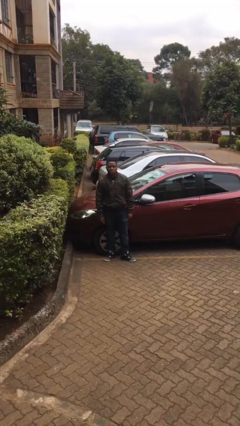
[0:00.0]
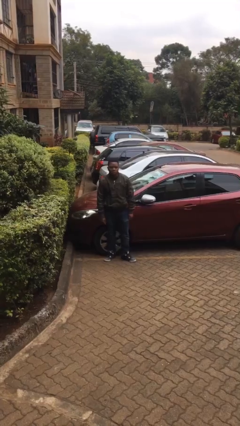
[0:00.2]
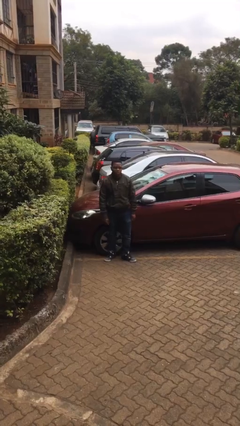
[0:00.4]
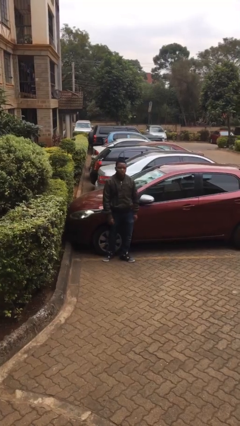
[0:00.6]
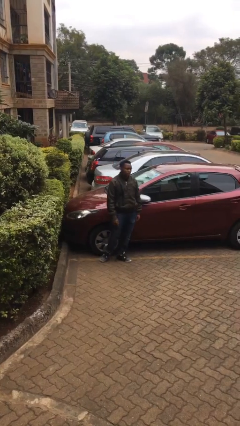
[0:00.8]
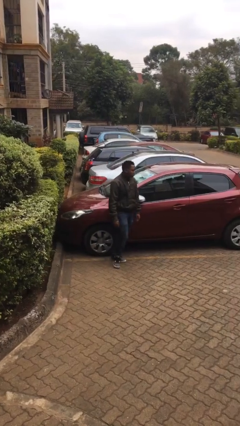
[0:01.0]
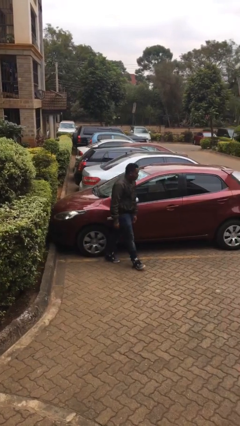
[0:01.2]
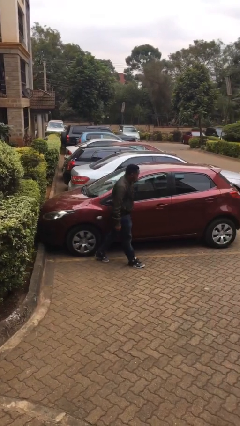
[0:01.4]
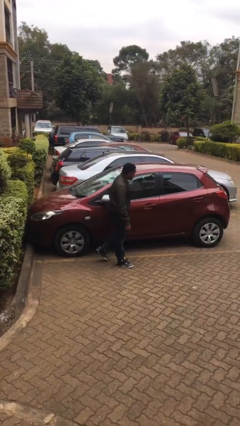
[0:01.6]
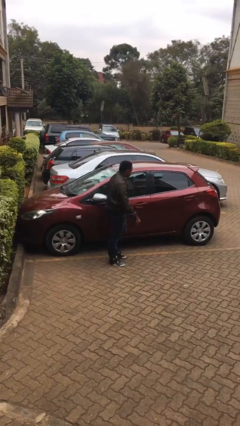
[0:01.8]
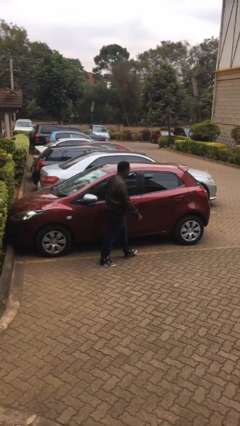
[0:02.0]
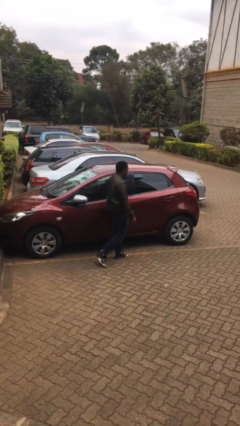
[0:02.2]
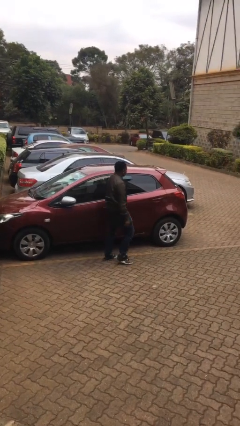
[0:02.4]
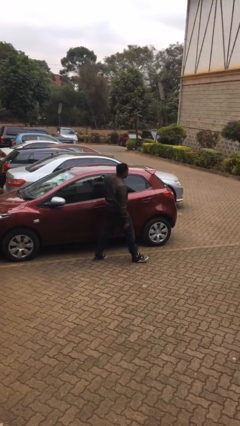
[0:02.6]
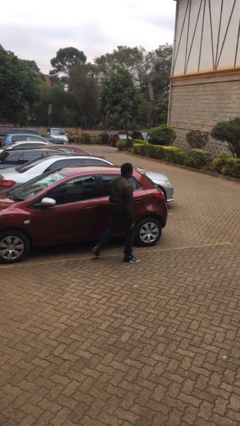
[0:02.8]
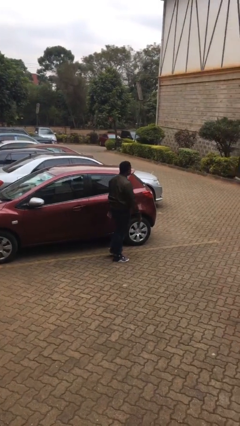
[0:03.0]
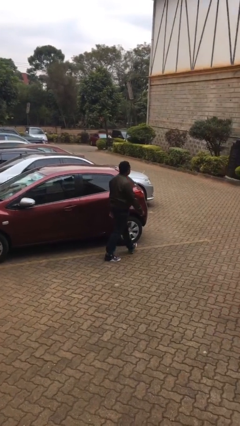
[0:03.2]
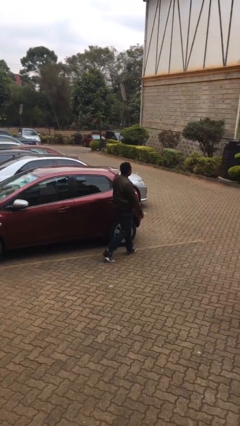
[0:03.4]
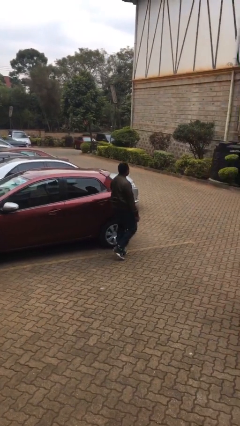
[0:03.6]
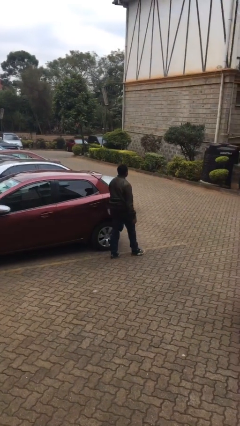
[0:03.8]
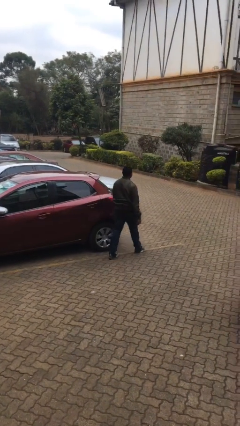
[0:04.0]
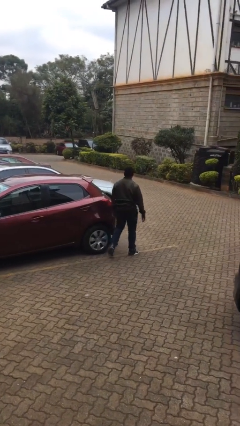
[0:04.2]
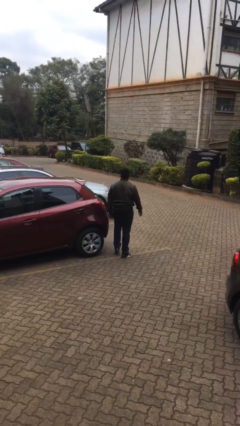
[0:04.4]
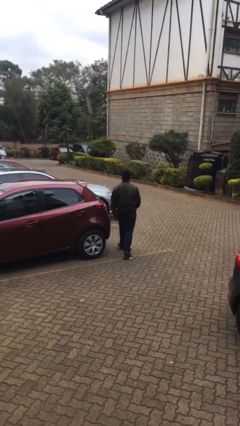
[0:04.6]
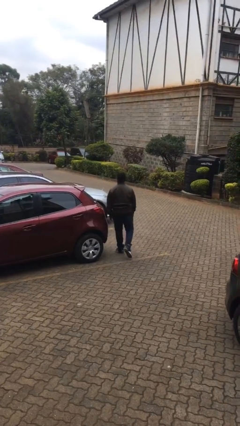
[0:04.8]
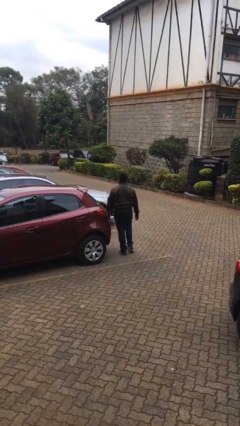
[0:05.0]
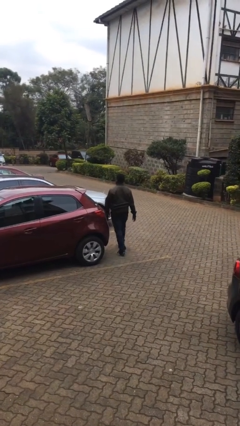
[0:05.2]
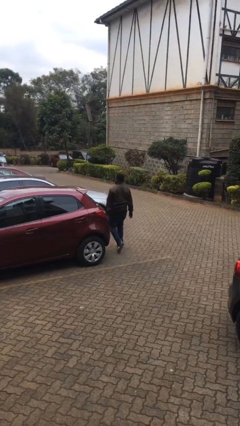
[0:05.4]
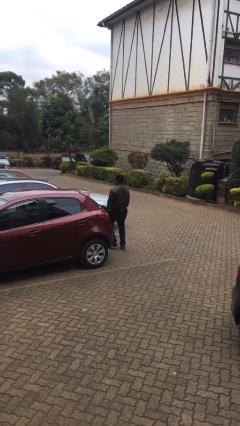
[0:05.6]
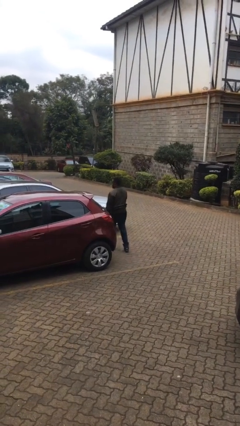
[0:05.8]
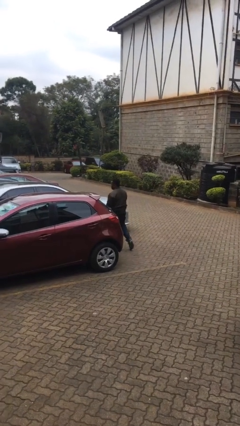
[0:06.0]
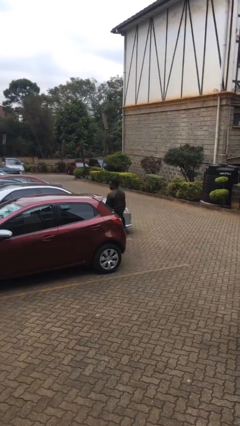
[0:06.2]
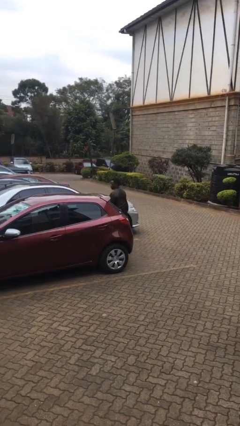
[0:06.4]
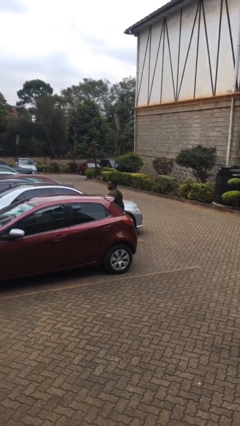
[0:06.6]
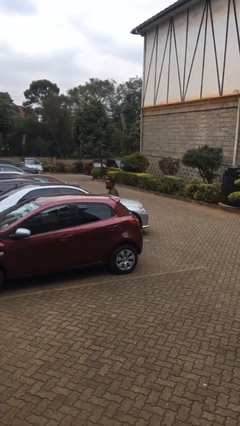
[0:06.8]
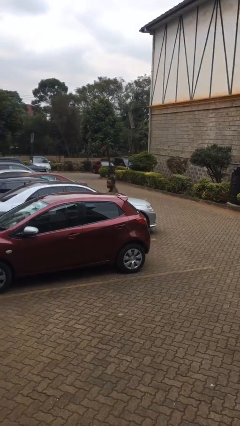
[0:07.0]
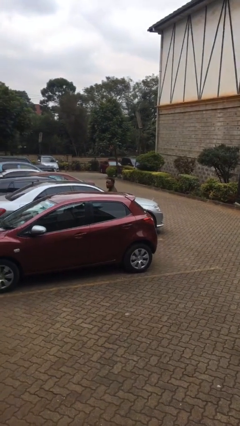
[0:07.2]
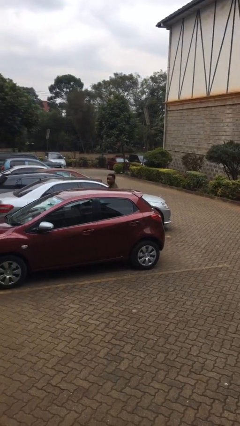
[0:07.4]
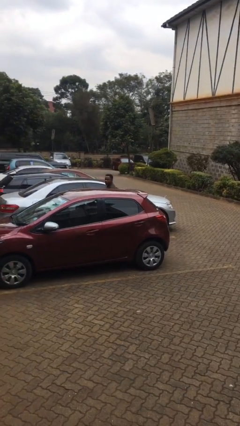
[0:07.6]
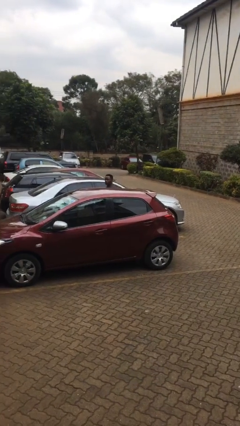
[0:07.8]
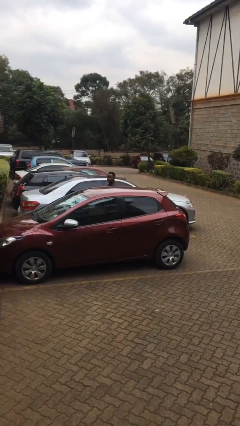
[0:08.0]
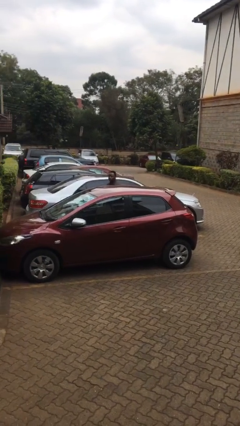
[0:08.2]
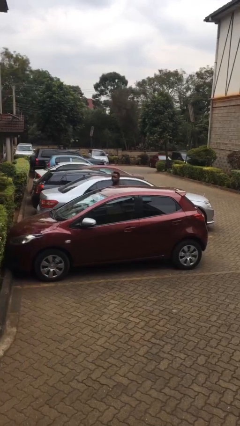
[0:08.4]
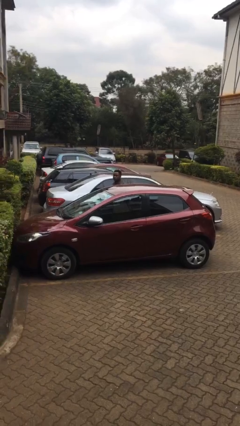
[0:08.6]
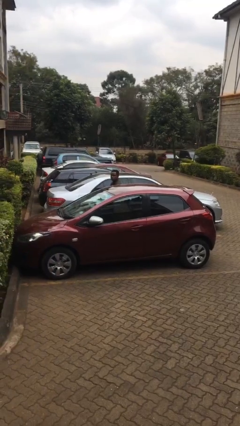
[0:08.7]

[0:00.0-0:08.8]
person walks around car

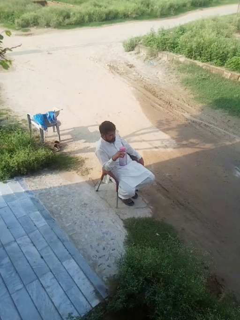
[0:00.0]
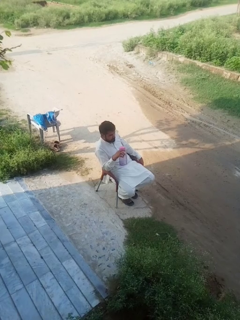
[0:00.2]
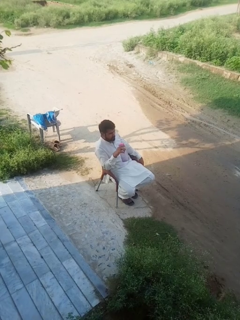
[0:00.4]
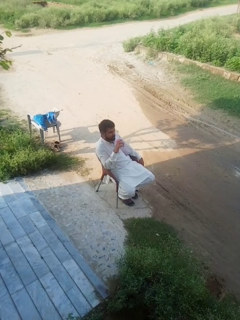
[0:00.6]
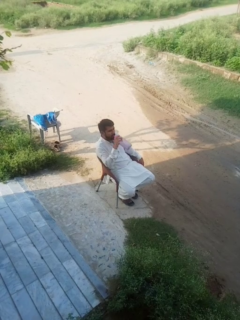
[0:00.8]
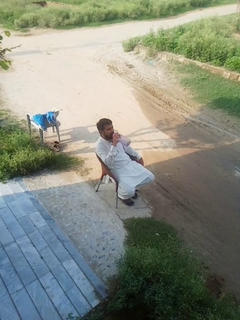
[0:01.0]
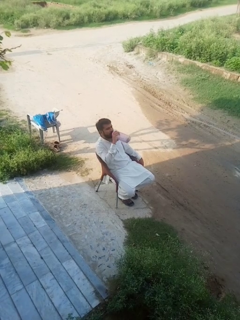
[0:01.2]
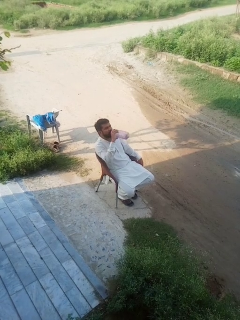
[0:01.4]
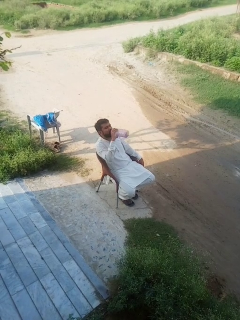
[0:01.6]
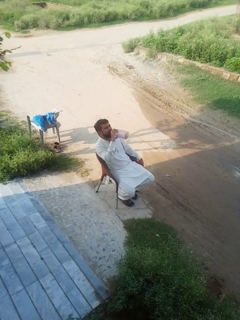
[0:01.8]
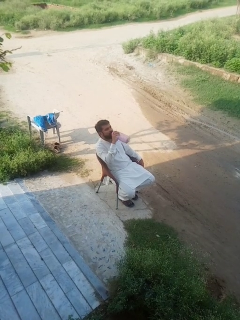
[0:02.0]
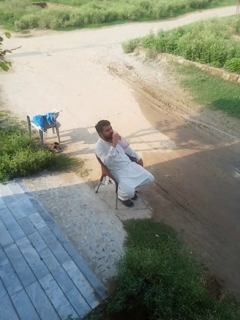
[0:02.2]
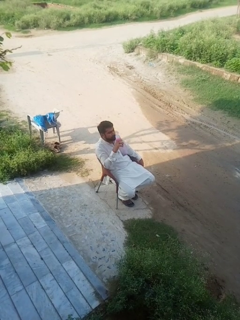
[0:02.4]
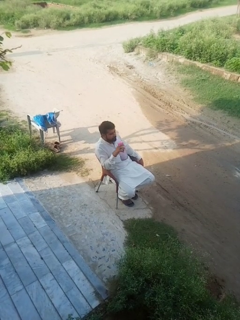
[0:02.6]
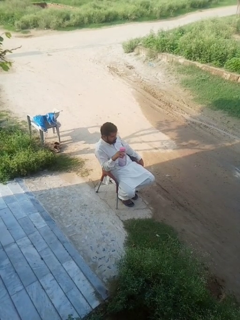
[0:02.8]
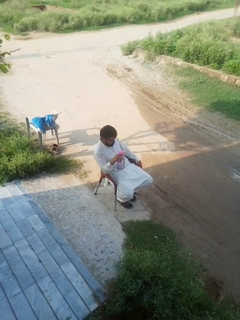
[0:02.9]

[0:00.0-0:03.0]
person drinks from bottle

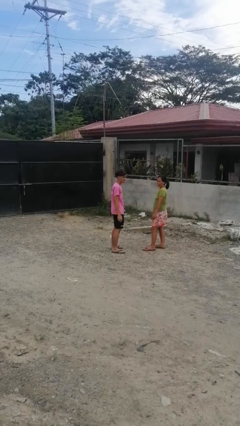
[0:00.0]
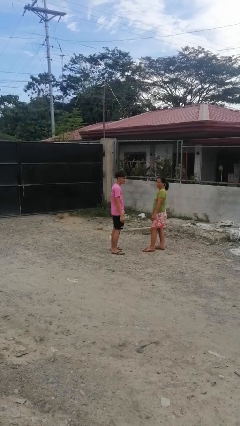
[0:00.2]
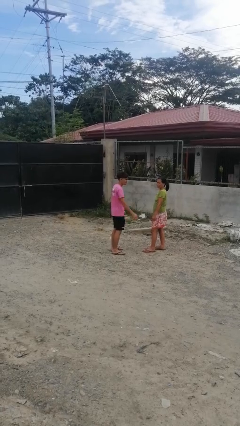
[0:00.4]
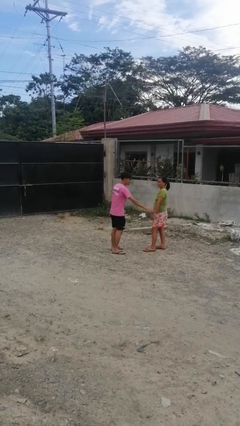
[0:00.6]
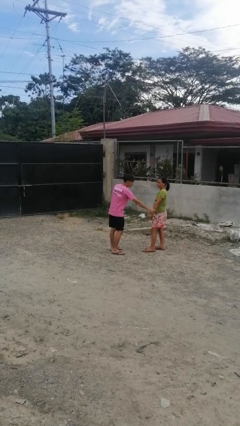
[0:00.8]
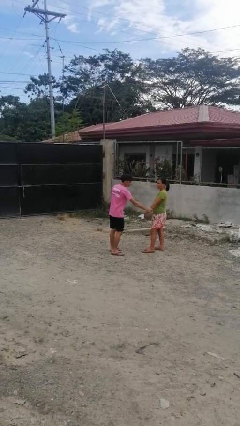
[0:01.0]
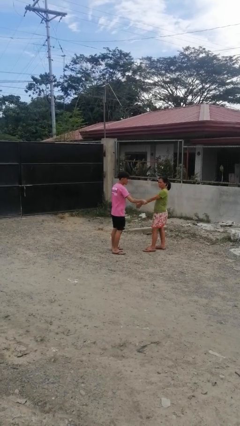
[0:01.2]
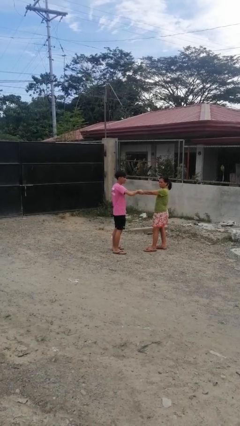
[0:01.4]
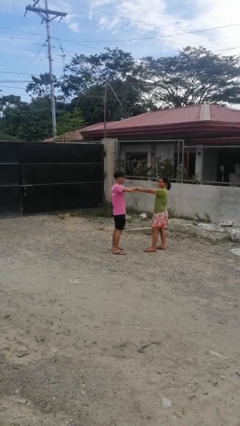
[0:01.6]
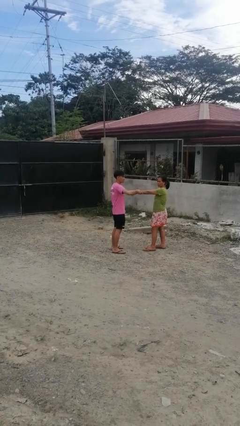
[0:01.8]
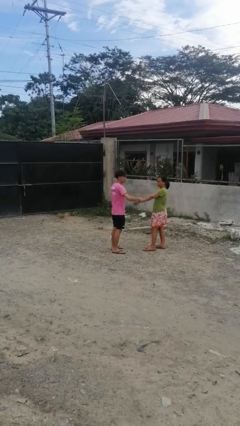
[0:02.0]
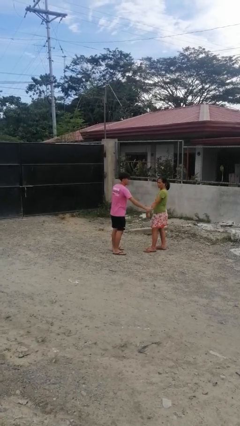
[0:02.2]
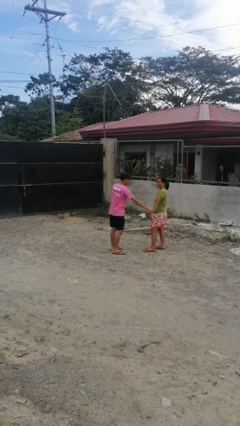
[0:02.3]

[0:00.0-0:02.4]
person grabs person by forearm

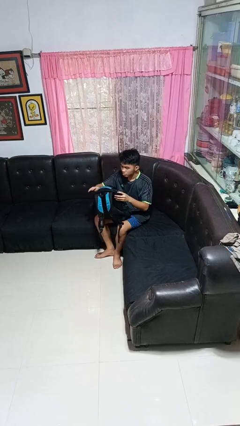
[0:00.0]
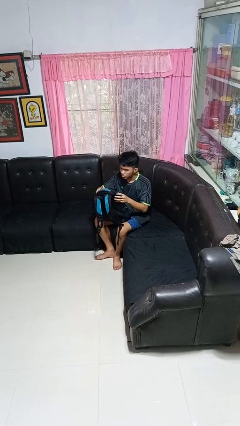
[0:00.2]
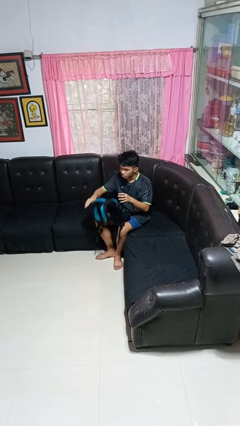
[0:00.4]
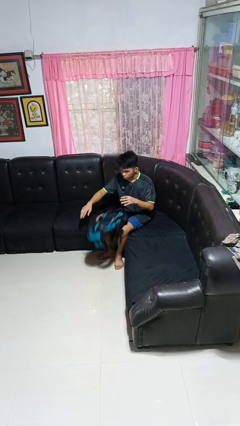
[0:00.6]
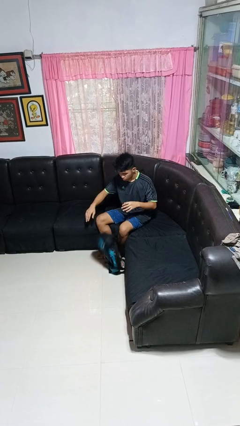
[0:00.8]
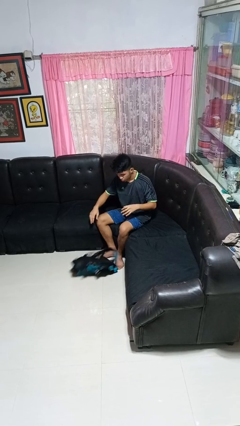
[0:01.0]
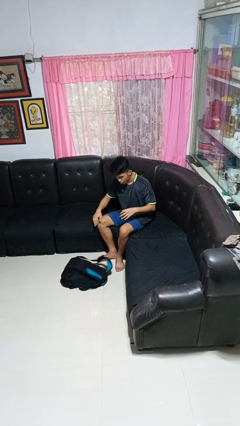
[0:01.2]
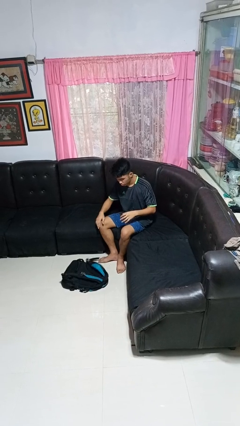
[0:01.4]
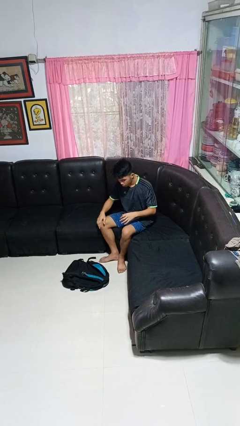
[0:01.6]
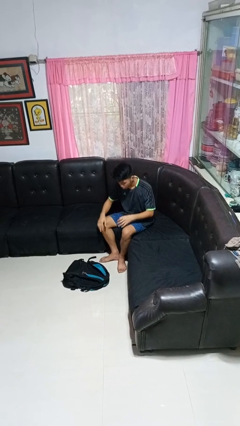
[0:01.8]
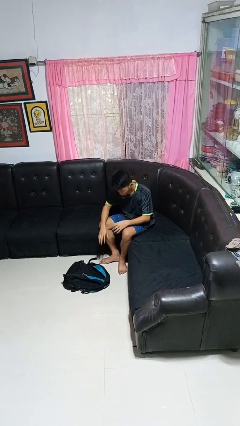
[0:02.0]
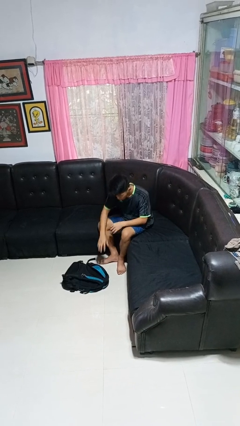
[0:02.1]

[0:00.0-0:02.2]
person drops object

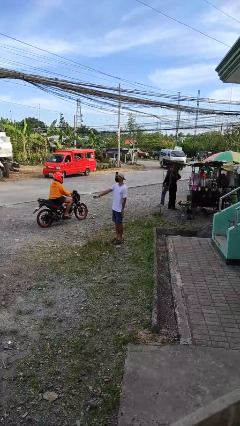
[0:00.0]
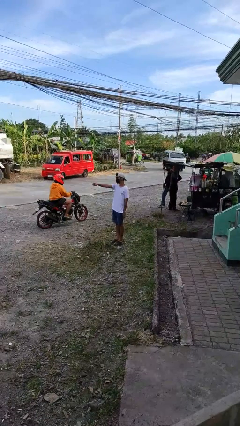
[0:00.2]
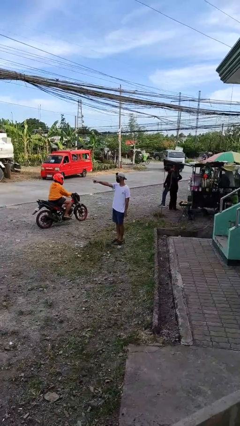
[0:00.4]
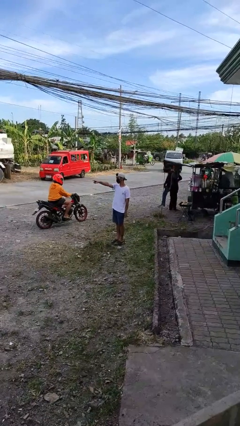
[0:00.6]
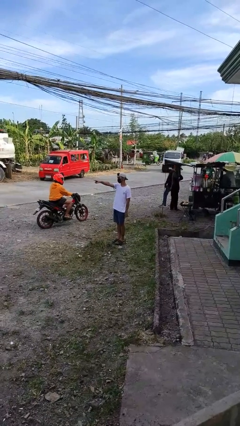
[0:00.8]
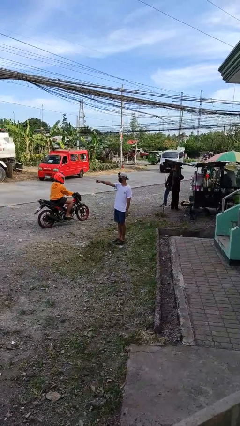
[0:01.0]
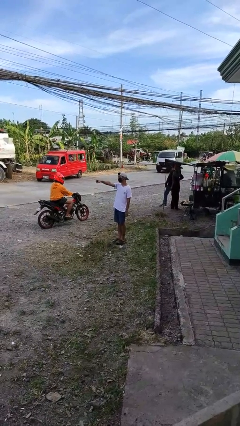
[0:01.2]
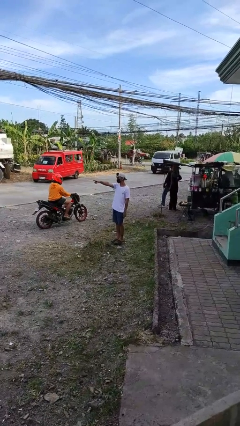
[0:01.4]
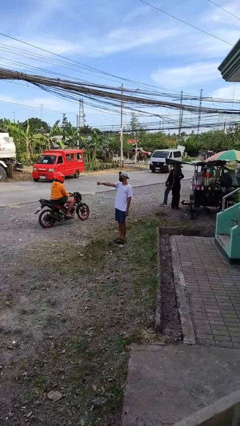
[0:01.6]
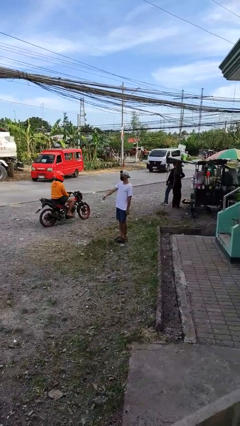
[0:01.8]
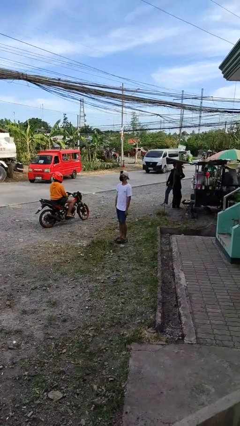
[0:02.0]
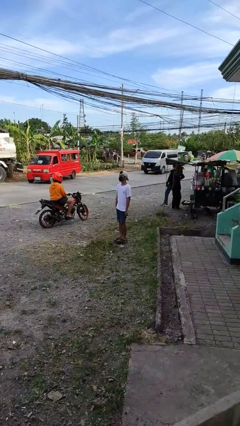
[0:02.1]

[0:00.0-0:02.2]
person points at person
